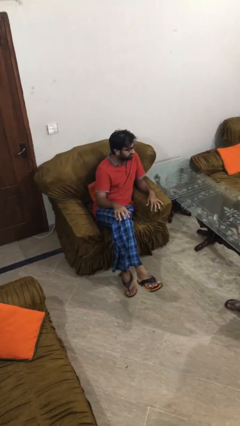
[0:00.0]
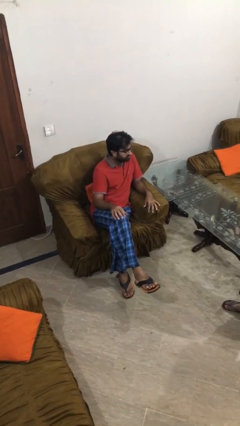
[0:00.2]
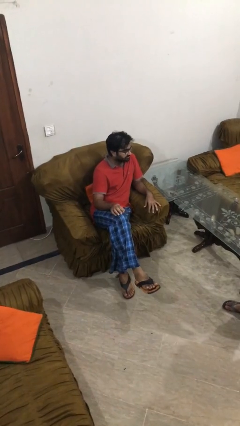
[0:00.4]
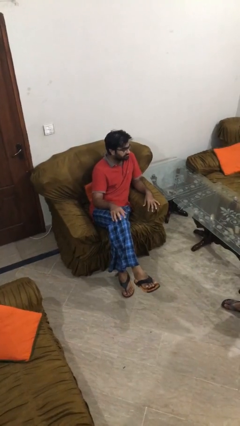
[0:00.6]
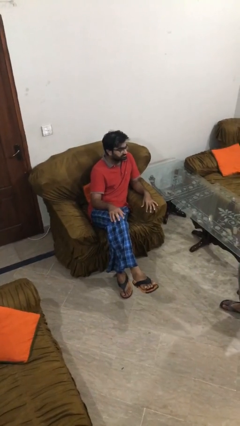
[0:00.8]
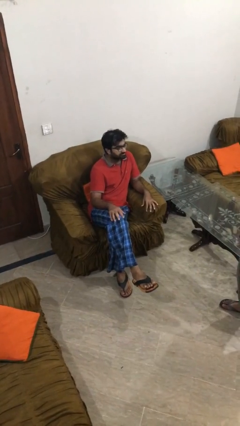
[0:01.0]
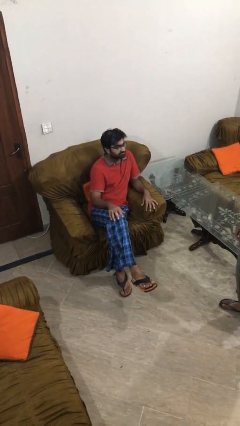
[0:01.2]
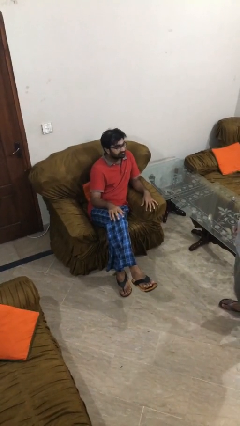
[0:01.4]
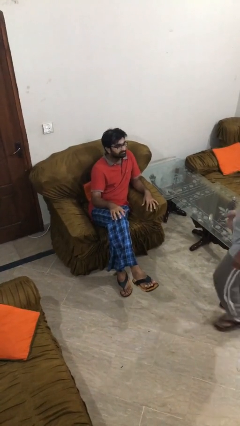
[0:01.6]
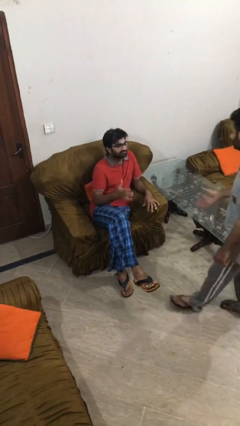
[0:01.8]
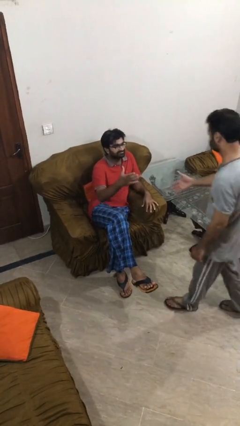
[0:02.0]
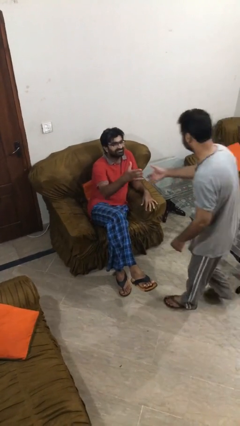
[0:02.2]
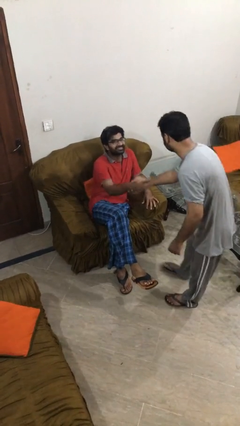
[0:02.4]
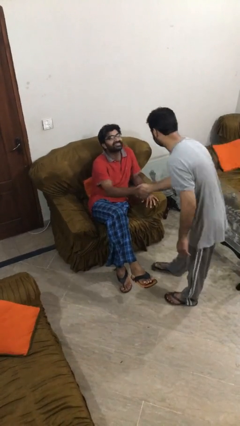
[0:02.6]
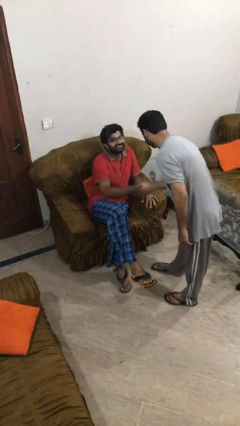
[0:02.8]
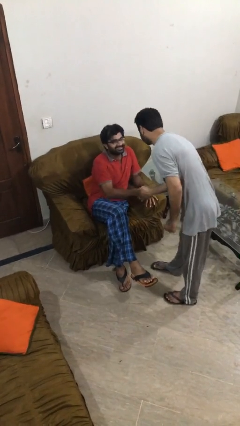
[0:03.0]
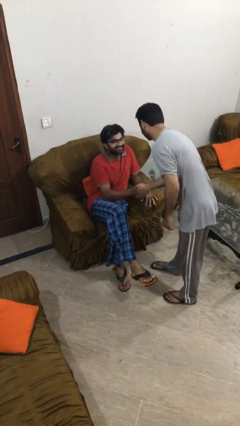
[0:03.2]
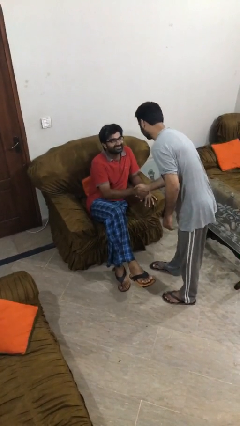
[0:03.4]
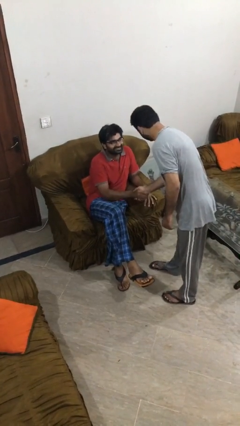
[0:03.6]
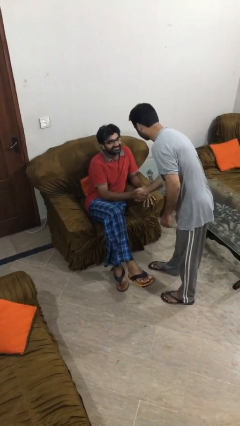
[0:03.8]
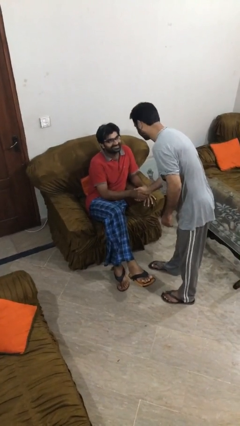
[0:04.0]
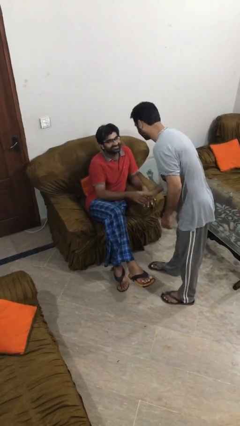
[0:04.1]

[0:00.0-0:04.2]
person shakes hand

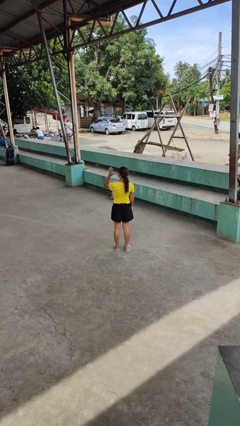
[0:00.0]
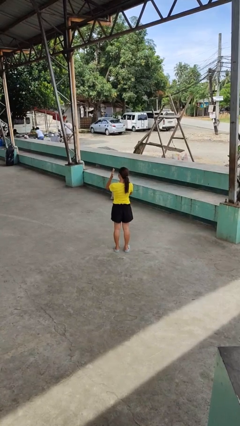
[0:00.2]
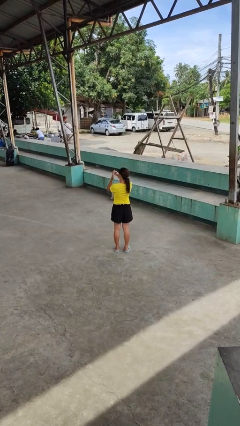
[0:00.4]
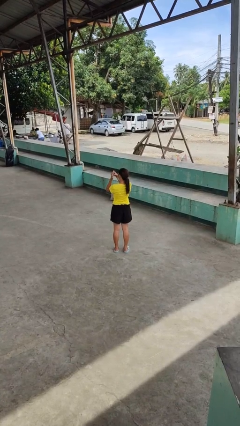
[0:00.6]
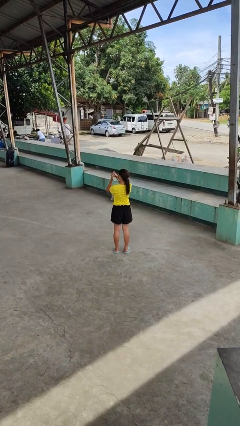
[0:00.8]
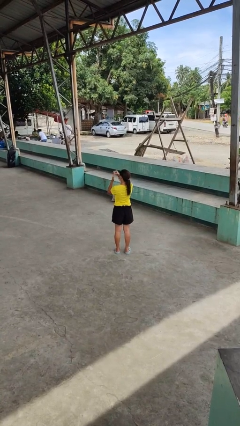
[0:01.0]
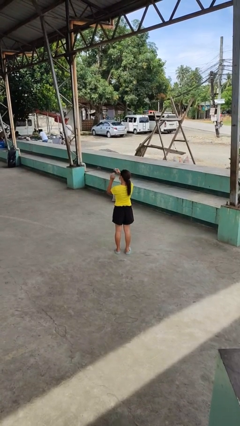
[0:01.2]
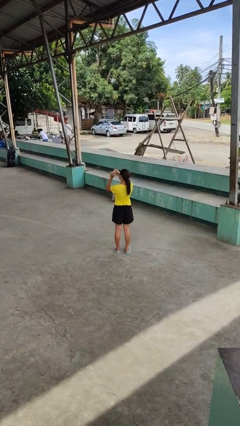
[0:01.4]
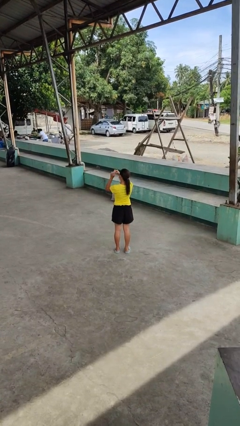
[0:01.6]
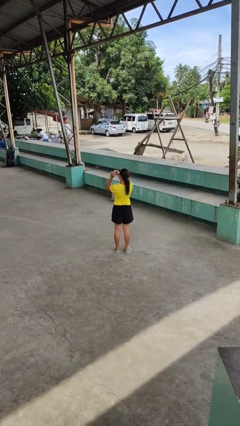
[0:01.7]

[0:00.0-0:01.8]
person takes off ring

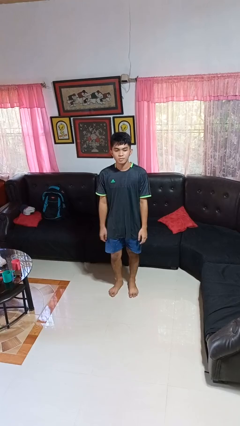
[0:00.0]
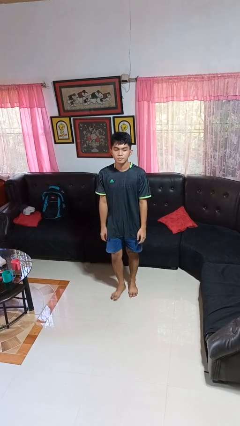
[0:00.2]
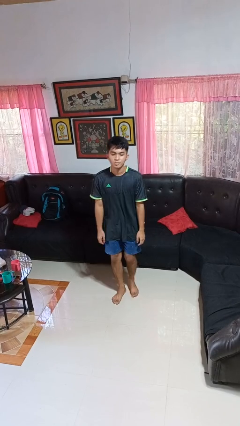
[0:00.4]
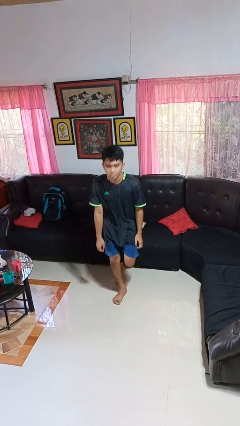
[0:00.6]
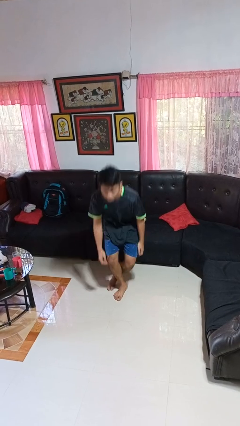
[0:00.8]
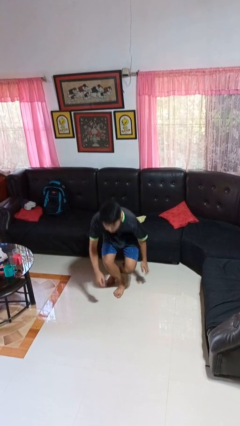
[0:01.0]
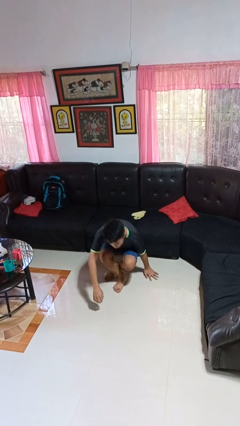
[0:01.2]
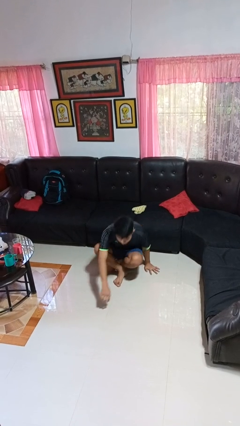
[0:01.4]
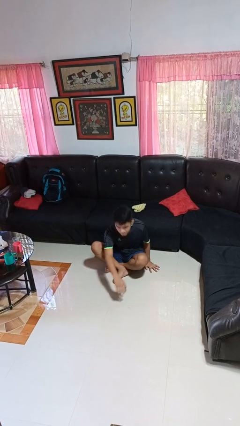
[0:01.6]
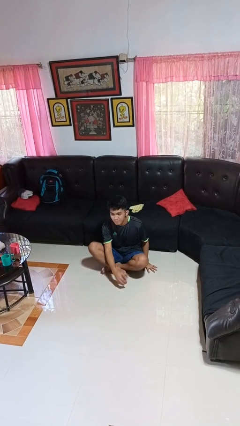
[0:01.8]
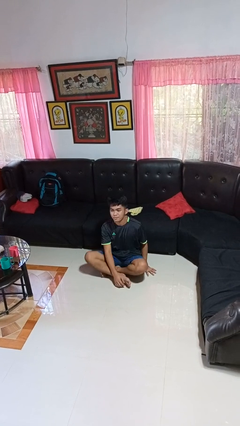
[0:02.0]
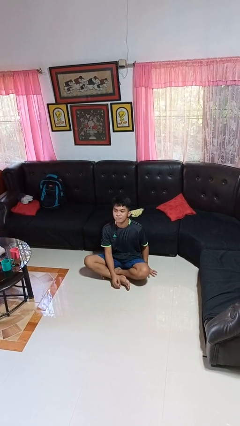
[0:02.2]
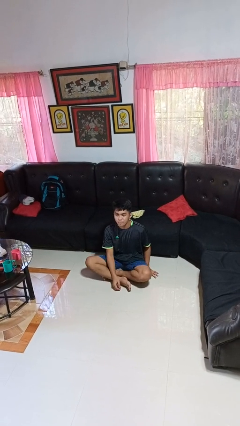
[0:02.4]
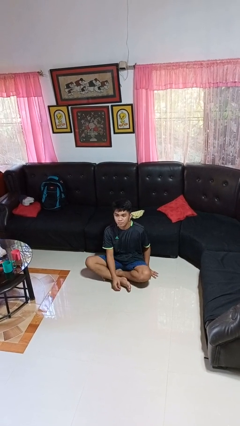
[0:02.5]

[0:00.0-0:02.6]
person sits crisscross

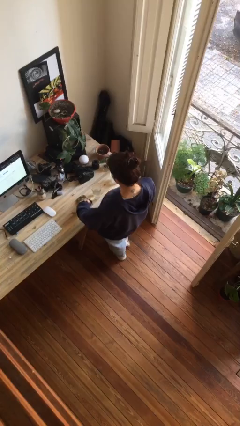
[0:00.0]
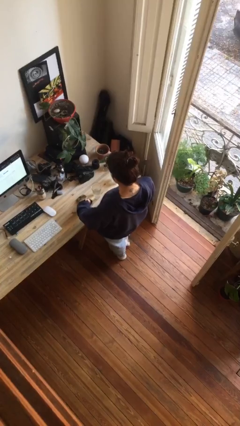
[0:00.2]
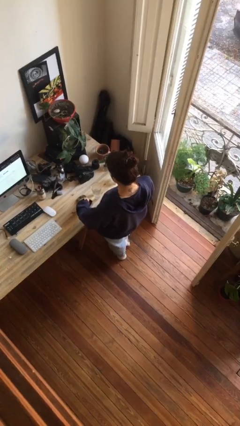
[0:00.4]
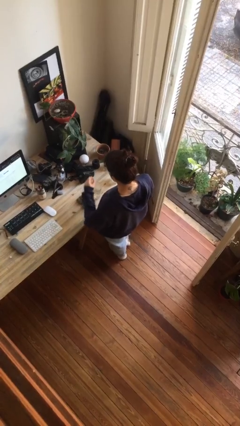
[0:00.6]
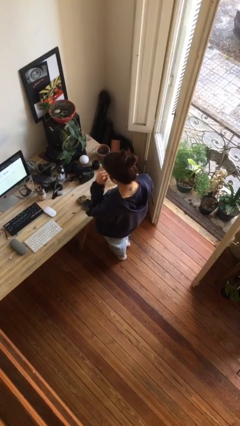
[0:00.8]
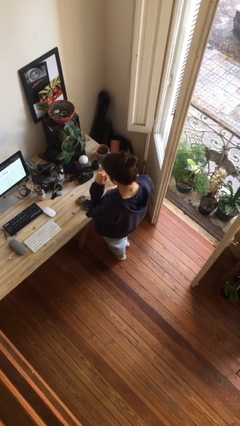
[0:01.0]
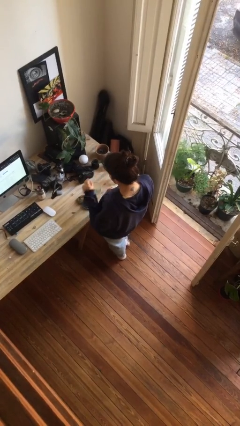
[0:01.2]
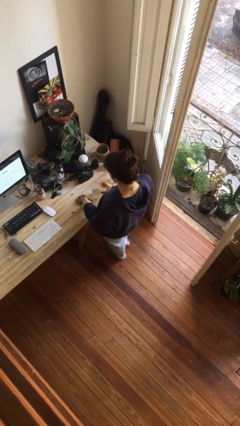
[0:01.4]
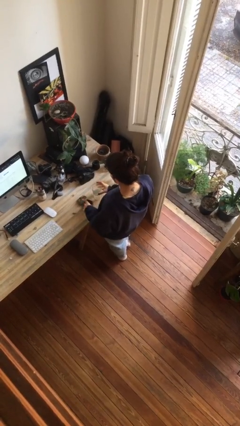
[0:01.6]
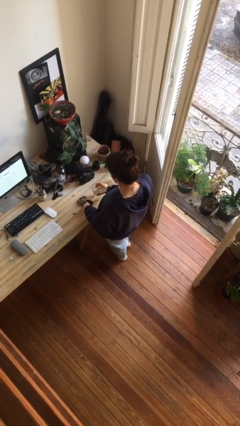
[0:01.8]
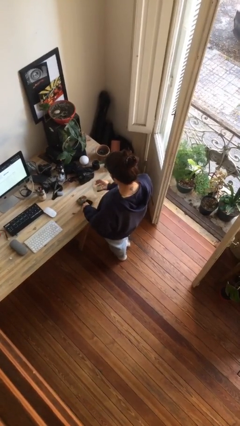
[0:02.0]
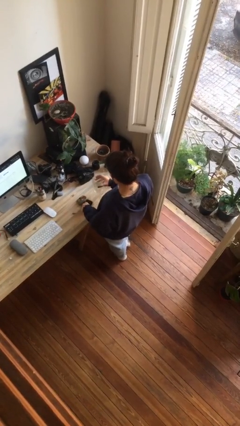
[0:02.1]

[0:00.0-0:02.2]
person takes medicine pills

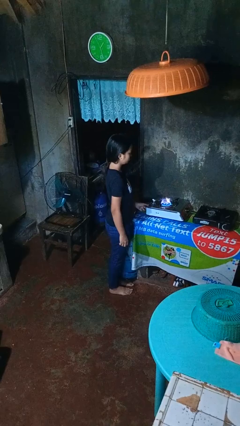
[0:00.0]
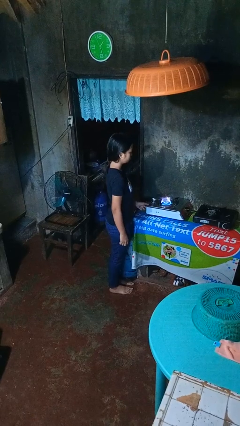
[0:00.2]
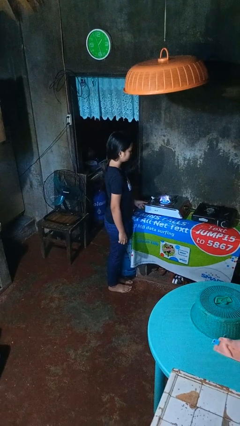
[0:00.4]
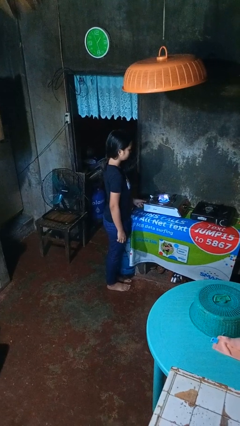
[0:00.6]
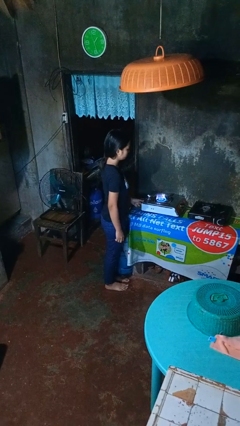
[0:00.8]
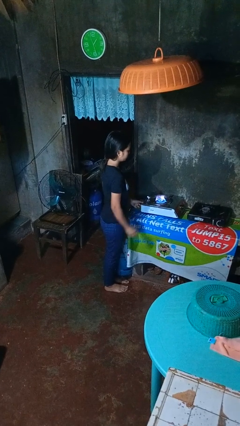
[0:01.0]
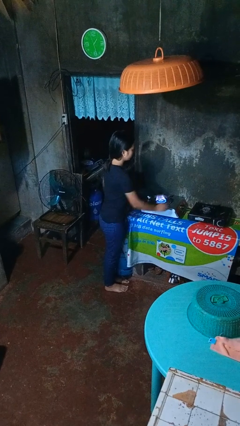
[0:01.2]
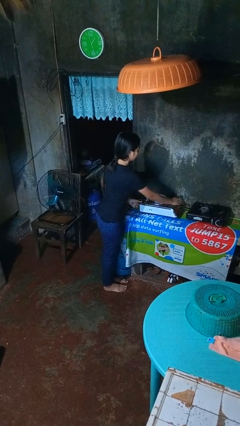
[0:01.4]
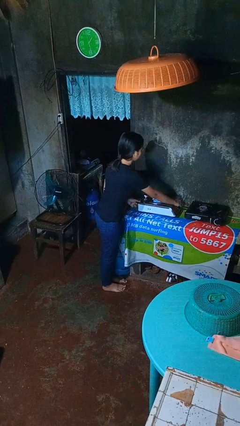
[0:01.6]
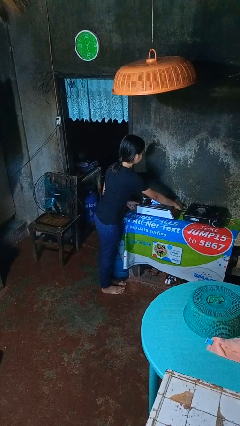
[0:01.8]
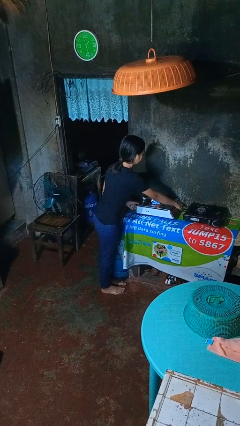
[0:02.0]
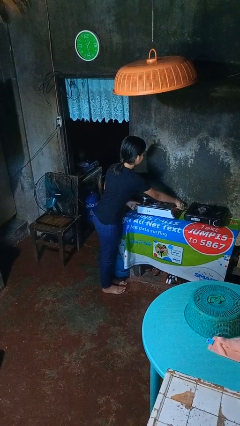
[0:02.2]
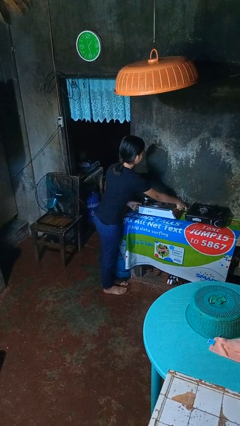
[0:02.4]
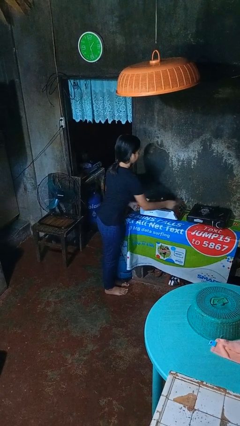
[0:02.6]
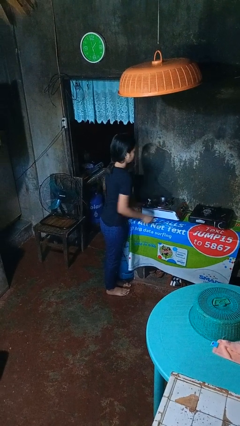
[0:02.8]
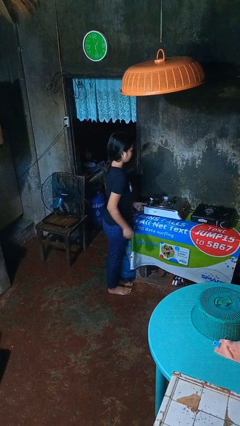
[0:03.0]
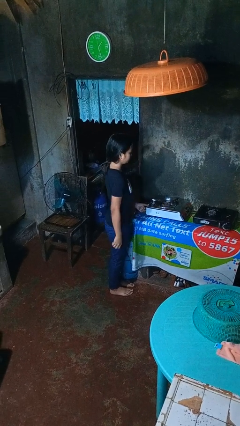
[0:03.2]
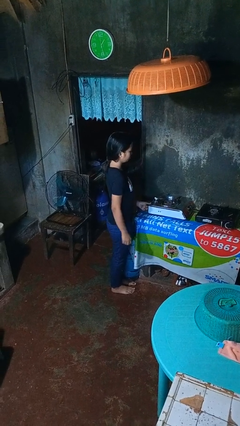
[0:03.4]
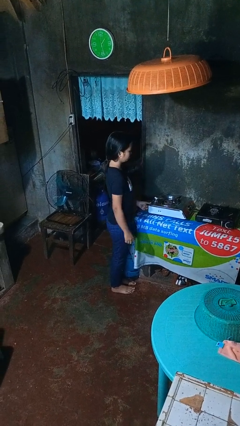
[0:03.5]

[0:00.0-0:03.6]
person turns off stovetop

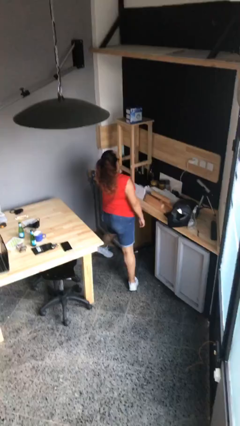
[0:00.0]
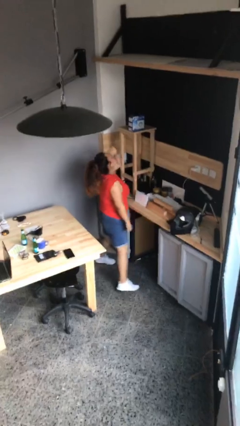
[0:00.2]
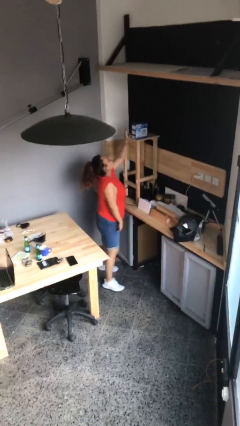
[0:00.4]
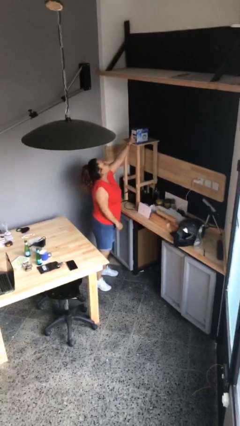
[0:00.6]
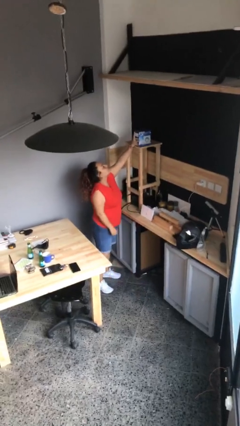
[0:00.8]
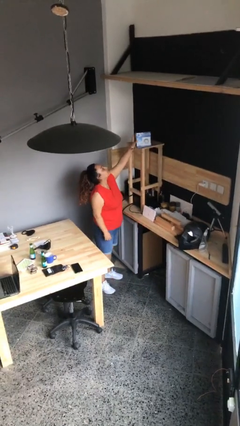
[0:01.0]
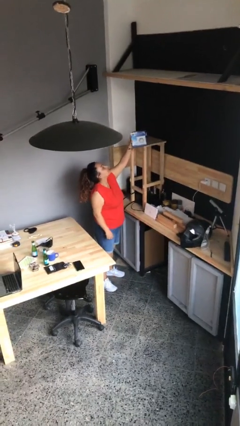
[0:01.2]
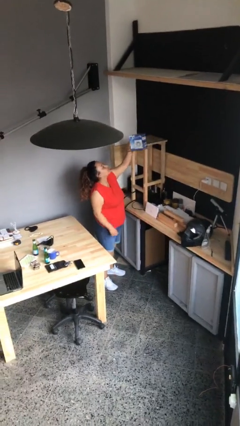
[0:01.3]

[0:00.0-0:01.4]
person picks up object from shelf

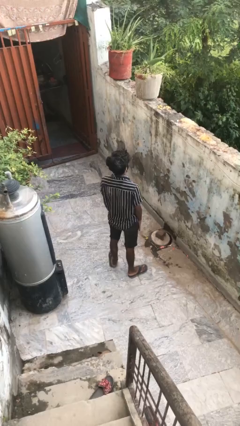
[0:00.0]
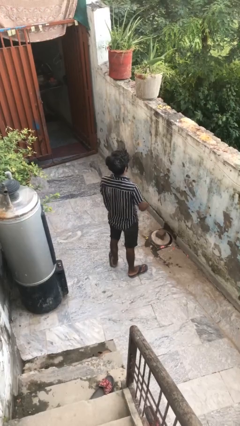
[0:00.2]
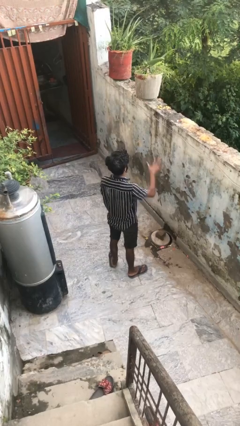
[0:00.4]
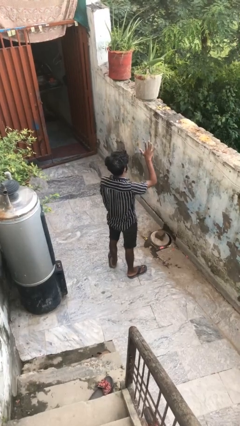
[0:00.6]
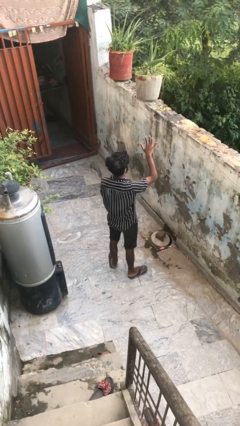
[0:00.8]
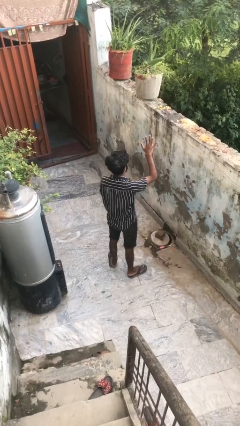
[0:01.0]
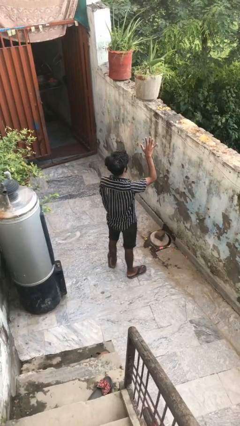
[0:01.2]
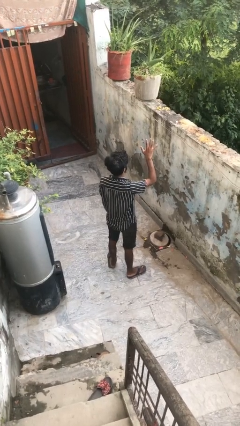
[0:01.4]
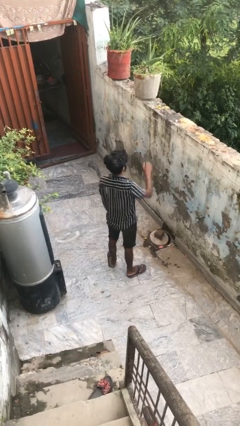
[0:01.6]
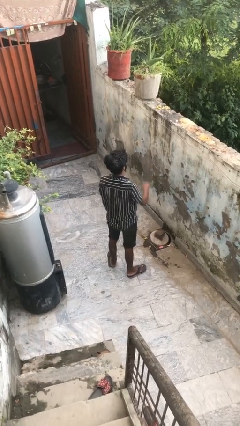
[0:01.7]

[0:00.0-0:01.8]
person gestures number five
